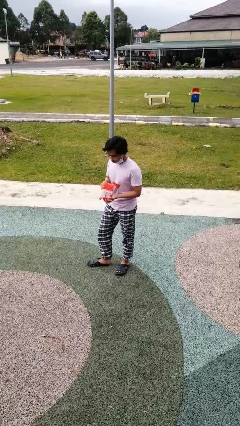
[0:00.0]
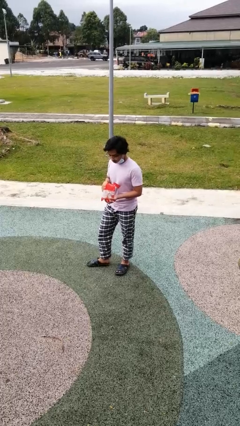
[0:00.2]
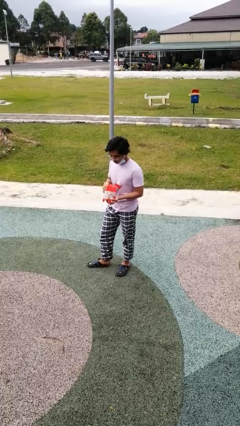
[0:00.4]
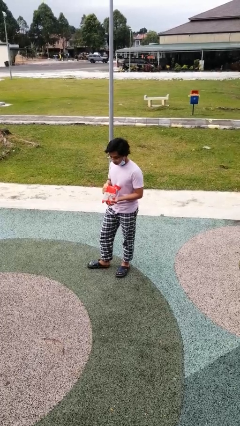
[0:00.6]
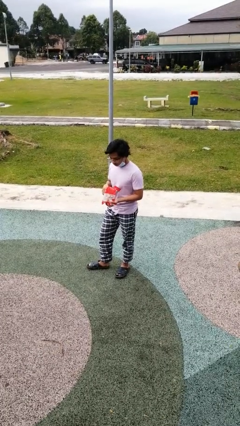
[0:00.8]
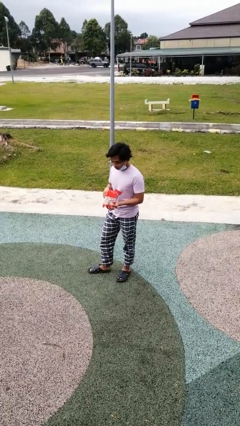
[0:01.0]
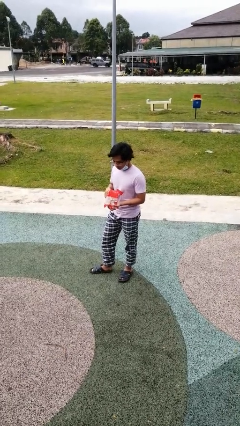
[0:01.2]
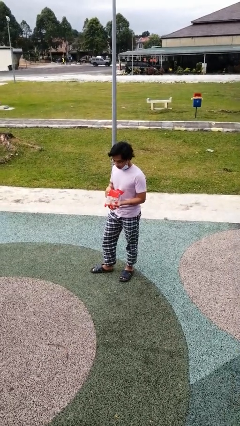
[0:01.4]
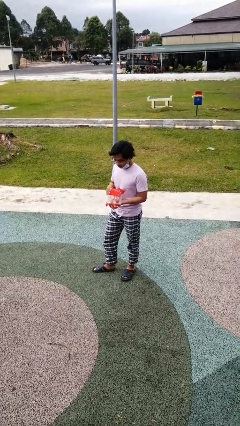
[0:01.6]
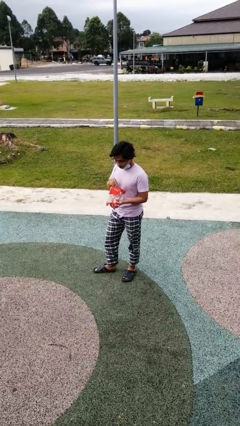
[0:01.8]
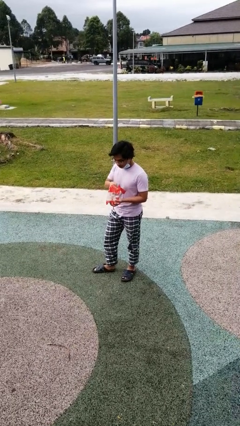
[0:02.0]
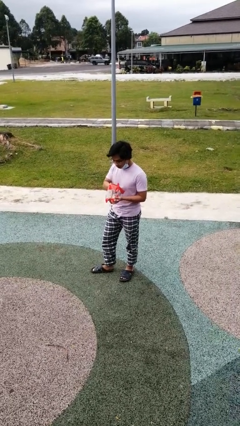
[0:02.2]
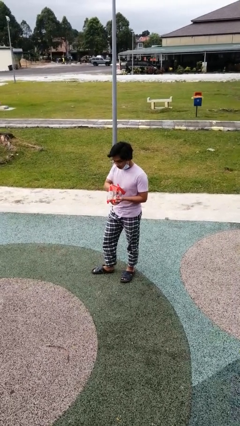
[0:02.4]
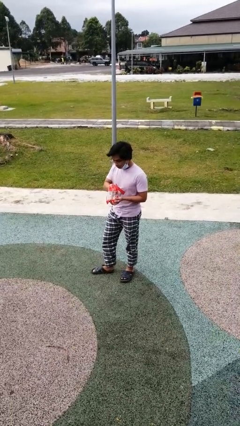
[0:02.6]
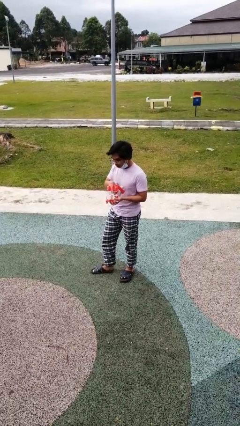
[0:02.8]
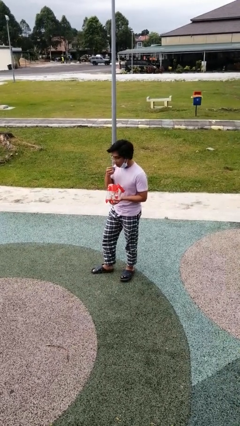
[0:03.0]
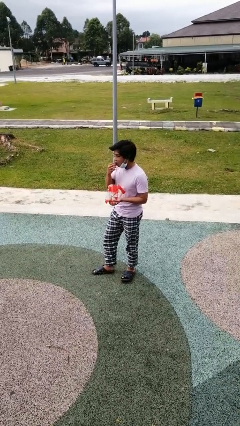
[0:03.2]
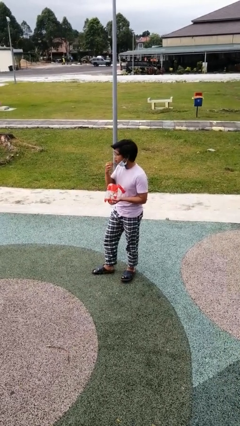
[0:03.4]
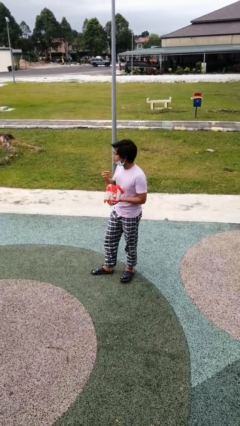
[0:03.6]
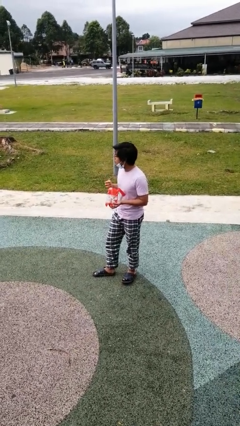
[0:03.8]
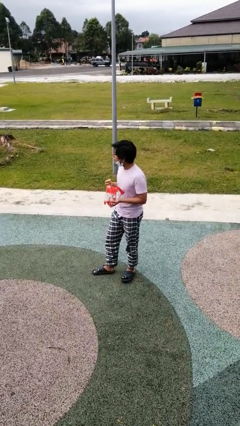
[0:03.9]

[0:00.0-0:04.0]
person eats snack from bag

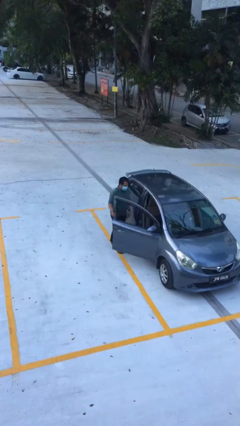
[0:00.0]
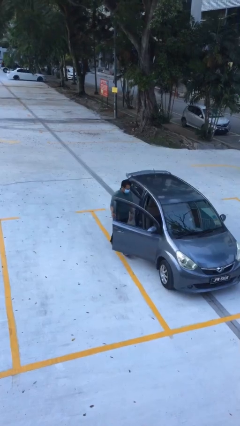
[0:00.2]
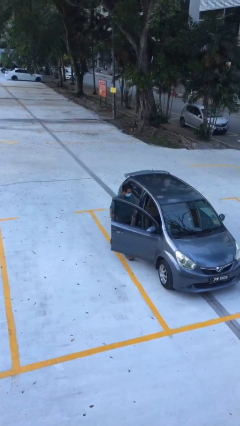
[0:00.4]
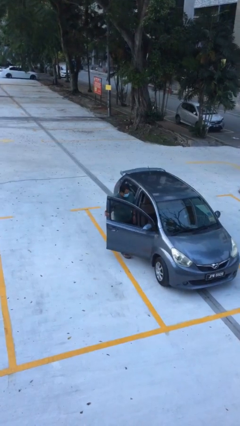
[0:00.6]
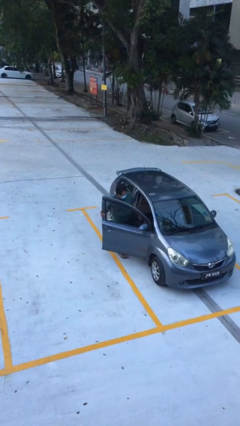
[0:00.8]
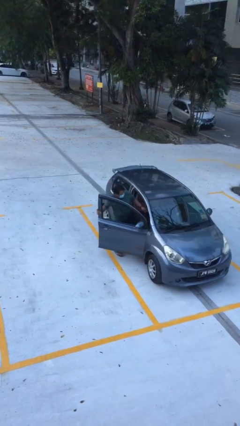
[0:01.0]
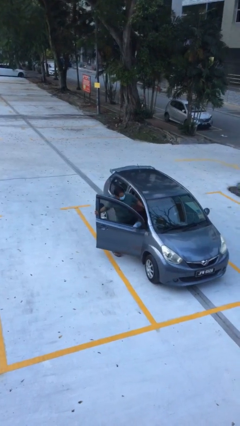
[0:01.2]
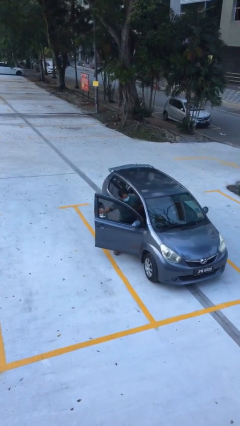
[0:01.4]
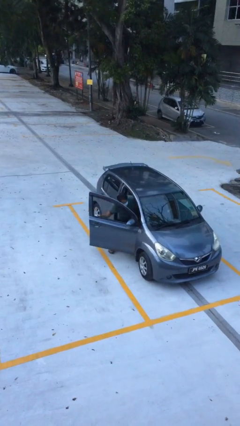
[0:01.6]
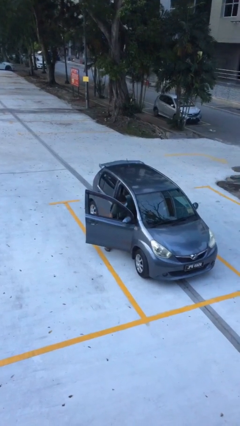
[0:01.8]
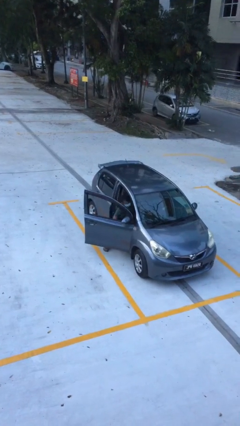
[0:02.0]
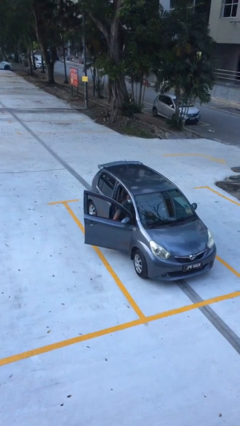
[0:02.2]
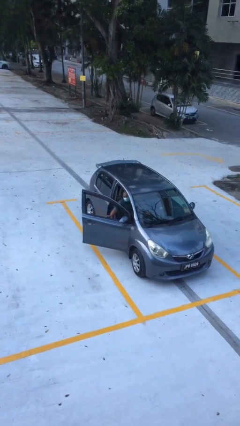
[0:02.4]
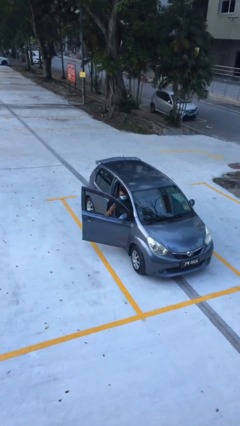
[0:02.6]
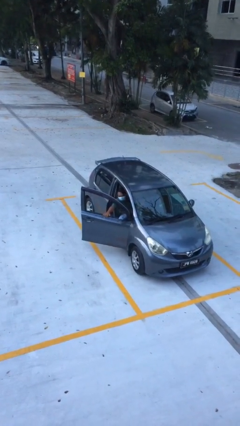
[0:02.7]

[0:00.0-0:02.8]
person enters car

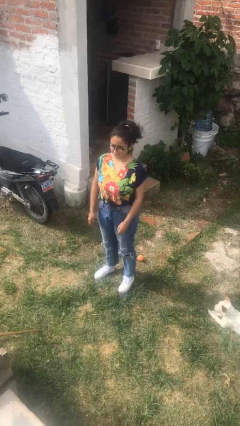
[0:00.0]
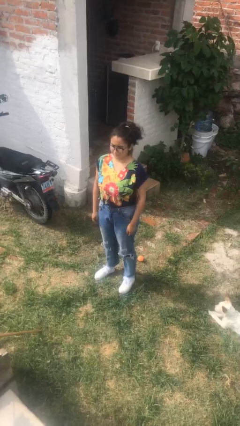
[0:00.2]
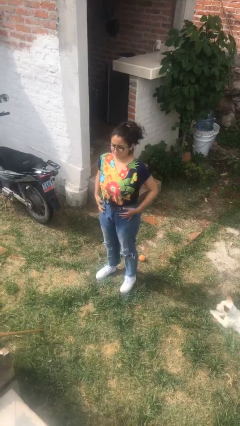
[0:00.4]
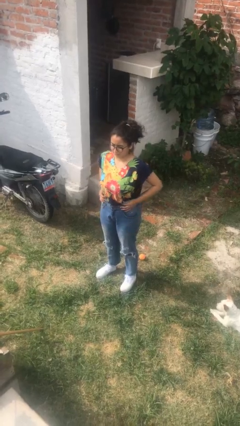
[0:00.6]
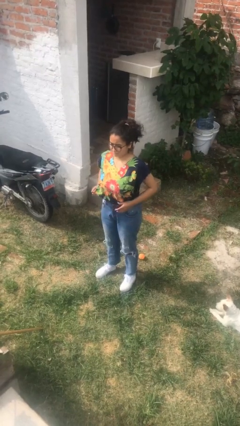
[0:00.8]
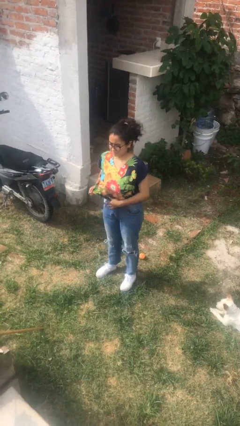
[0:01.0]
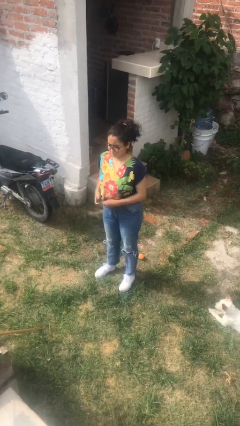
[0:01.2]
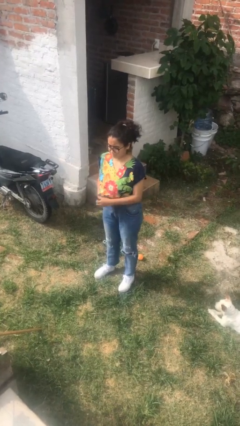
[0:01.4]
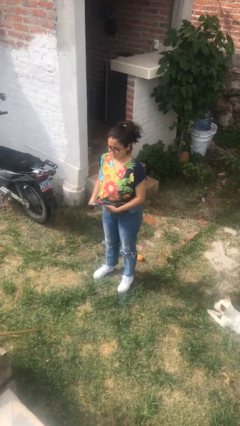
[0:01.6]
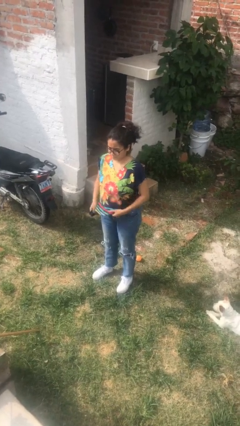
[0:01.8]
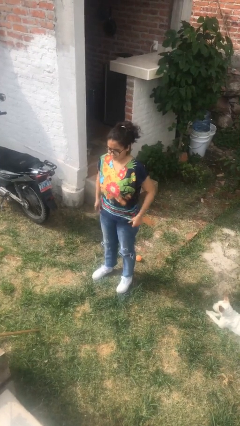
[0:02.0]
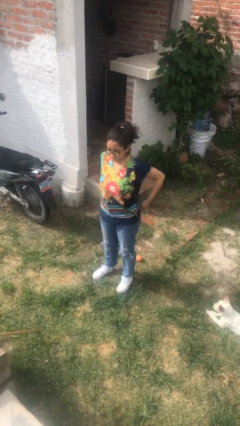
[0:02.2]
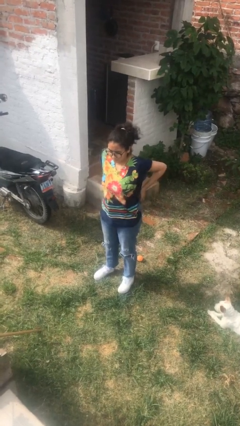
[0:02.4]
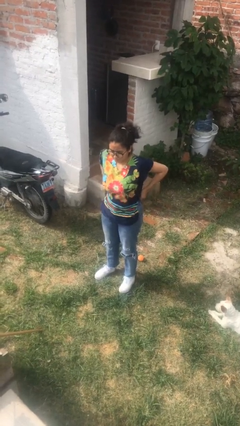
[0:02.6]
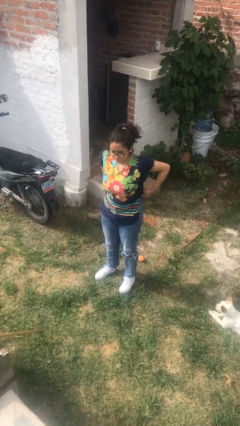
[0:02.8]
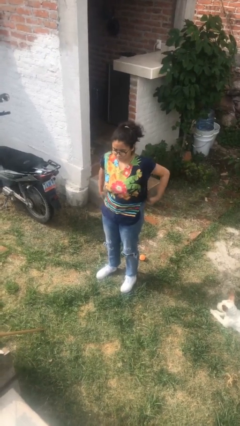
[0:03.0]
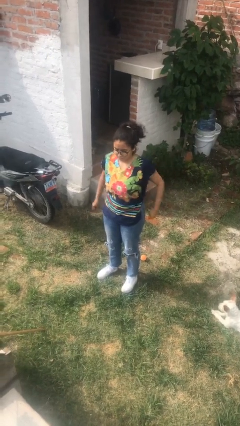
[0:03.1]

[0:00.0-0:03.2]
person untucks shirt

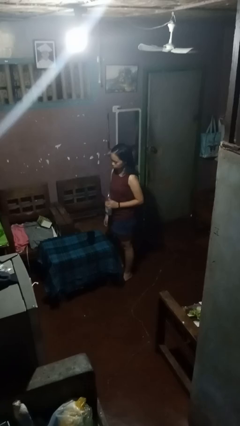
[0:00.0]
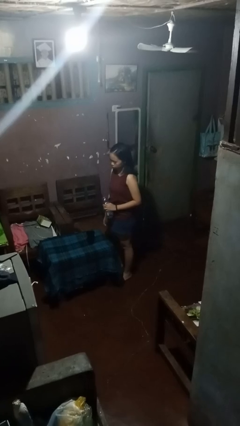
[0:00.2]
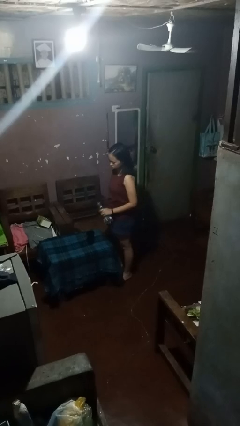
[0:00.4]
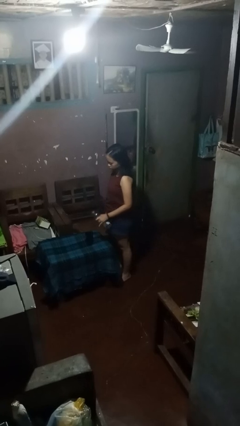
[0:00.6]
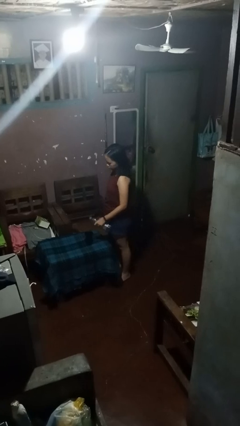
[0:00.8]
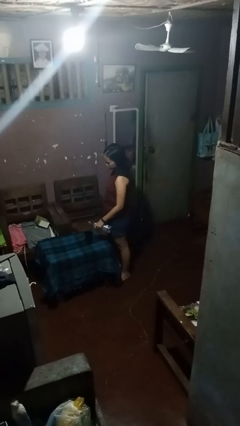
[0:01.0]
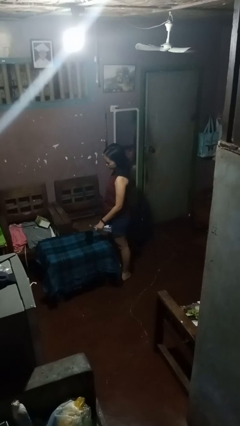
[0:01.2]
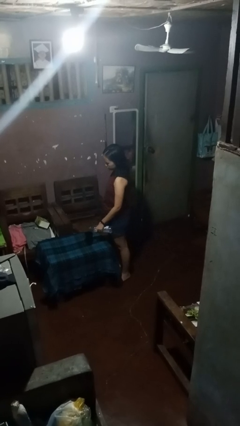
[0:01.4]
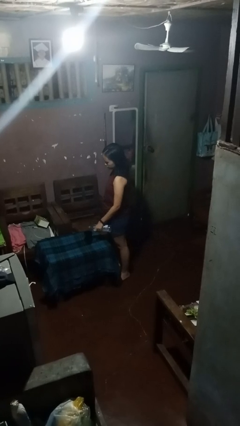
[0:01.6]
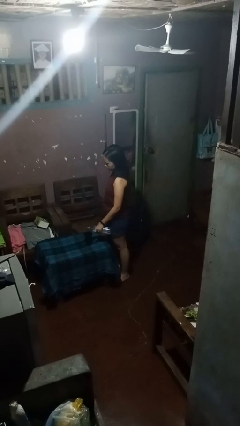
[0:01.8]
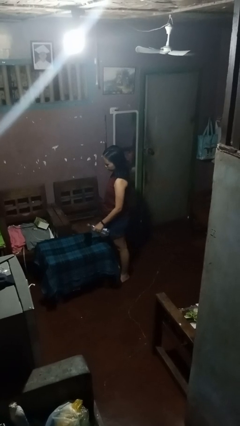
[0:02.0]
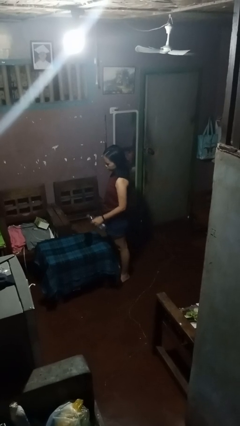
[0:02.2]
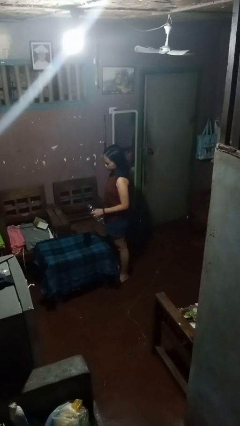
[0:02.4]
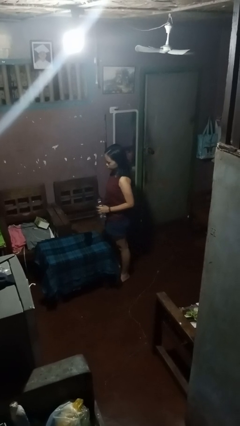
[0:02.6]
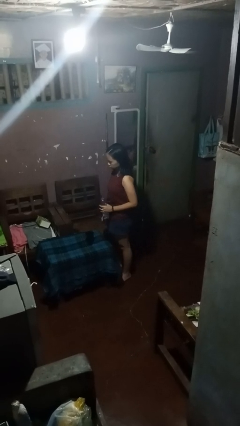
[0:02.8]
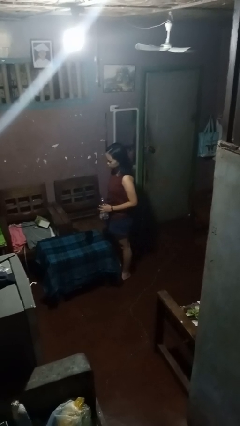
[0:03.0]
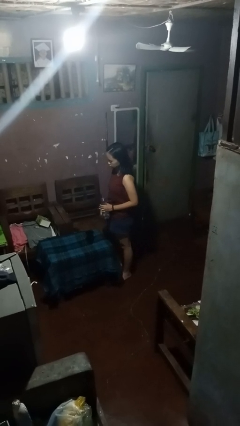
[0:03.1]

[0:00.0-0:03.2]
person pours liquid into cup

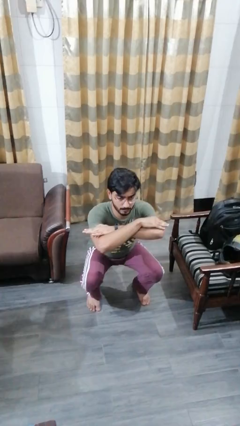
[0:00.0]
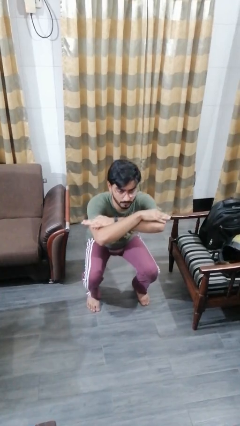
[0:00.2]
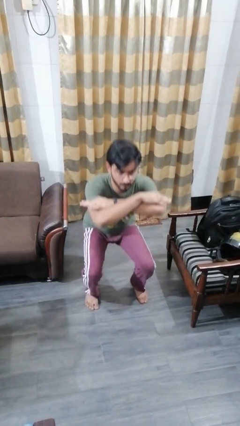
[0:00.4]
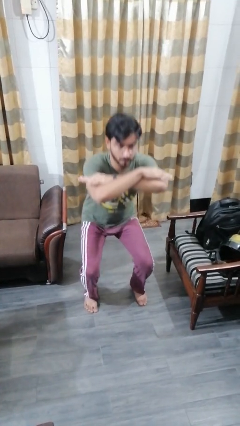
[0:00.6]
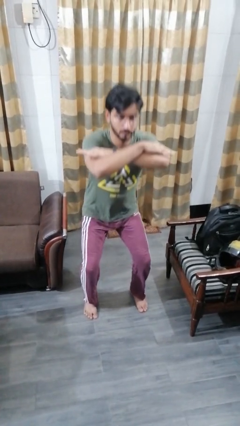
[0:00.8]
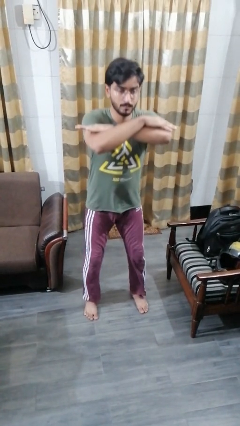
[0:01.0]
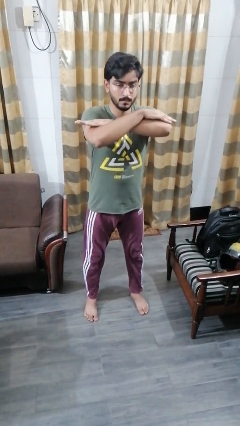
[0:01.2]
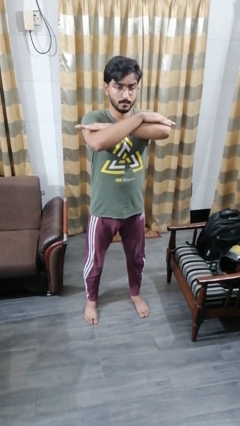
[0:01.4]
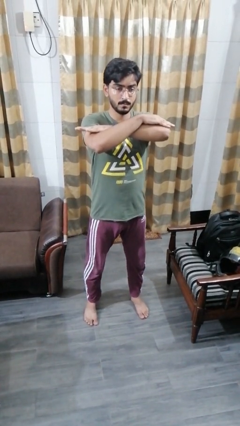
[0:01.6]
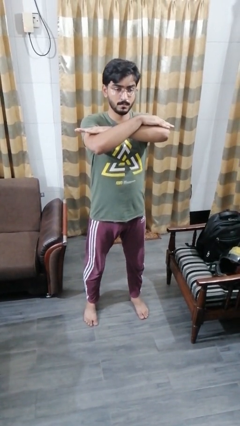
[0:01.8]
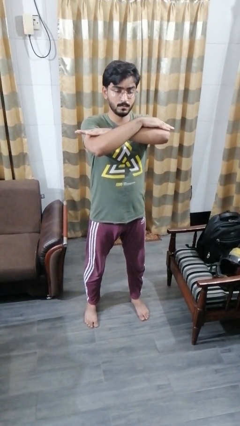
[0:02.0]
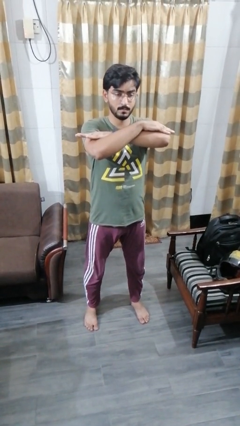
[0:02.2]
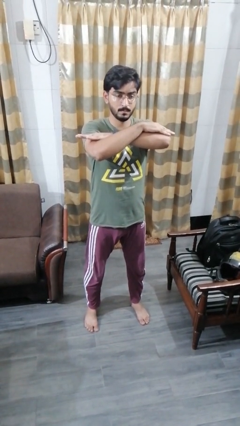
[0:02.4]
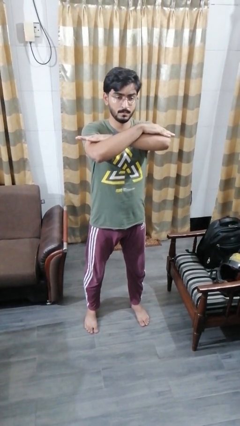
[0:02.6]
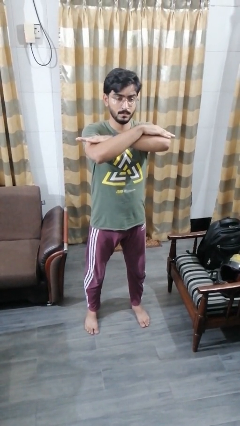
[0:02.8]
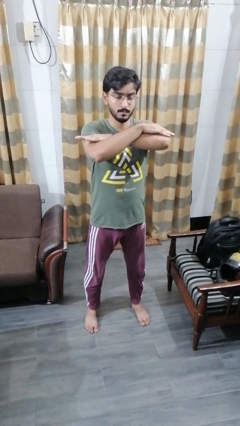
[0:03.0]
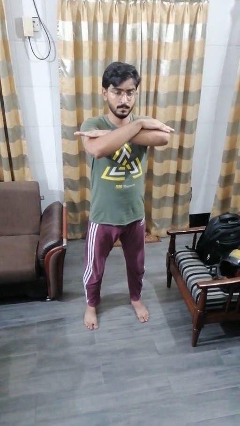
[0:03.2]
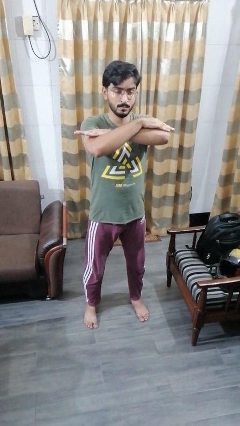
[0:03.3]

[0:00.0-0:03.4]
person stands up from floor

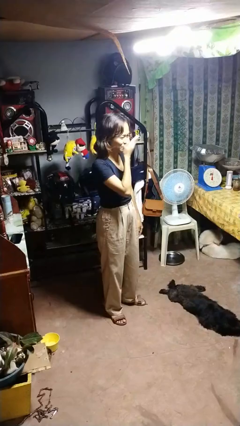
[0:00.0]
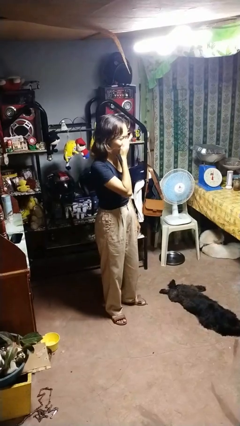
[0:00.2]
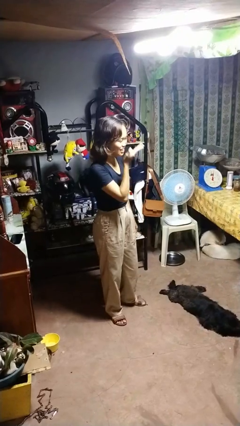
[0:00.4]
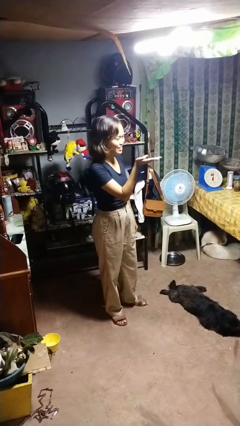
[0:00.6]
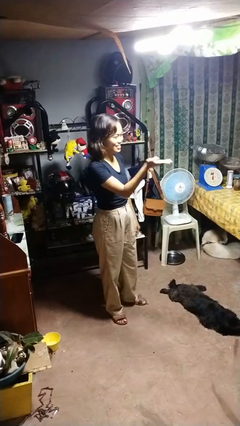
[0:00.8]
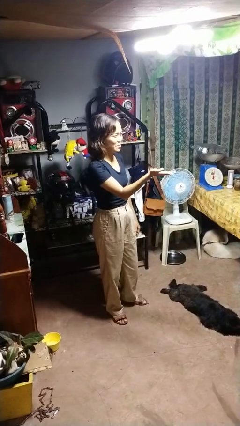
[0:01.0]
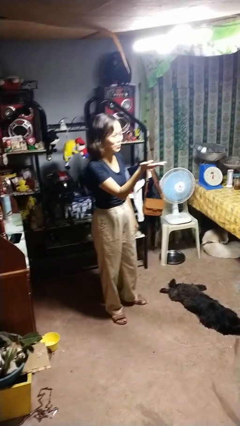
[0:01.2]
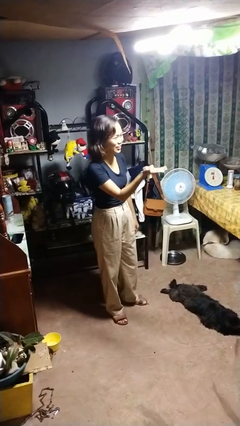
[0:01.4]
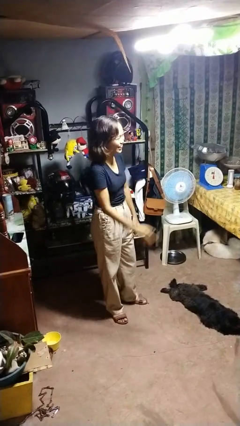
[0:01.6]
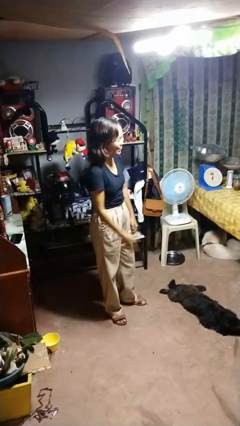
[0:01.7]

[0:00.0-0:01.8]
person gestures blow kiss
